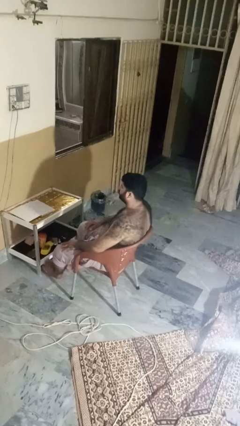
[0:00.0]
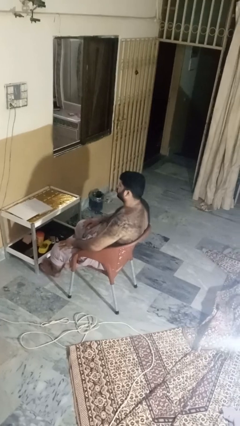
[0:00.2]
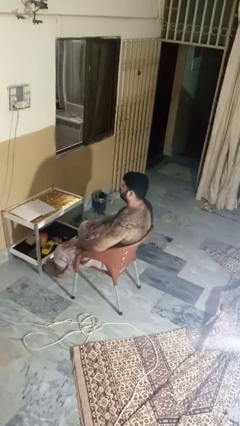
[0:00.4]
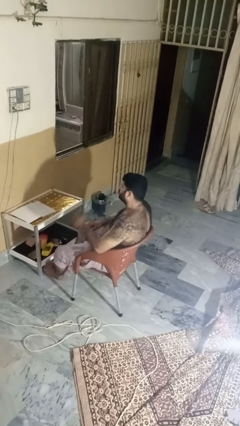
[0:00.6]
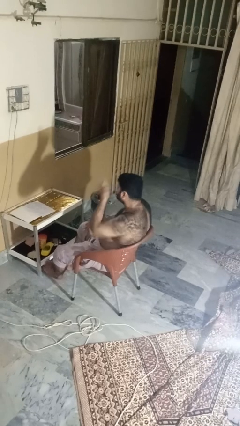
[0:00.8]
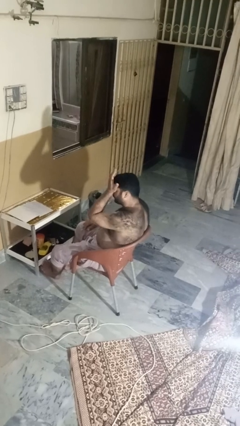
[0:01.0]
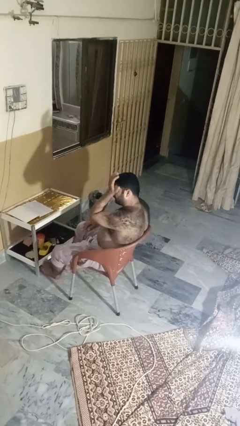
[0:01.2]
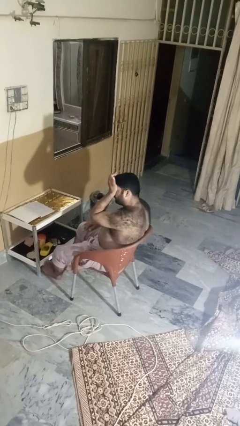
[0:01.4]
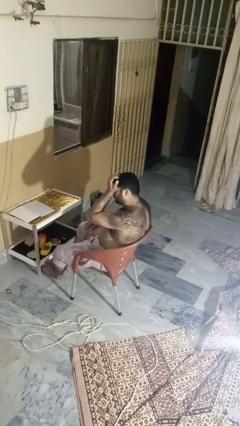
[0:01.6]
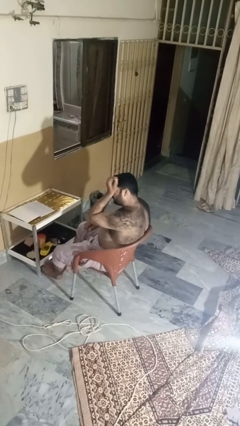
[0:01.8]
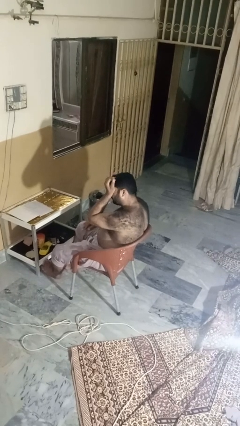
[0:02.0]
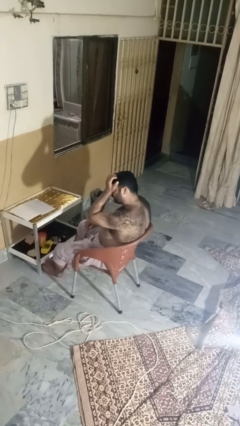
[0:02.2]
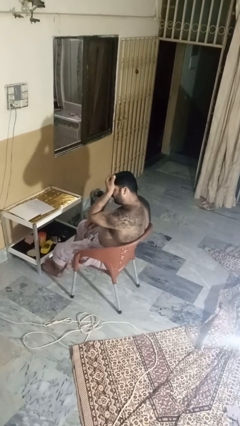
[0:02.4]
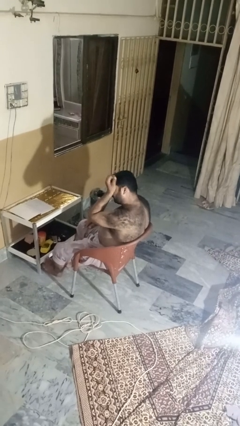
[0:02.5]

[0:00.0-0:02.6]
person rubs eyes

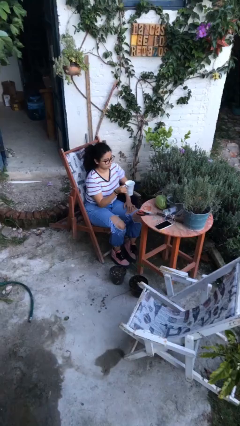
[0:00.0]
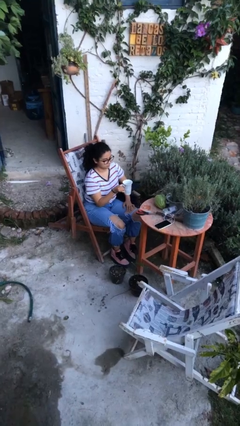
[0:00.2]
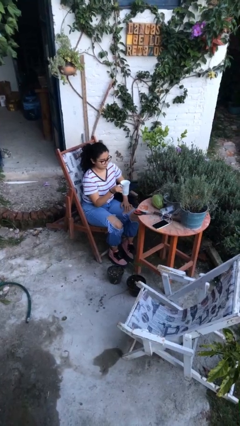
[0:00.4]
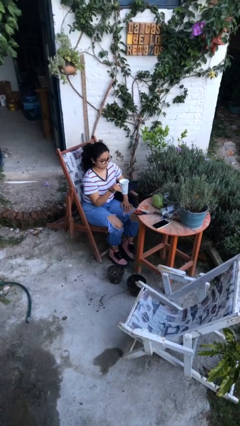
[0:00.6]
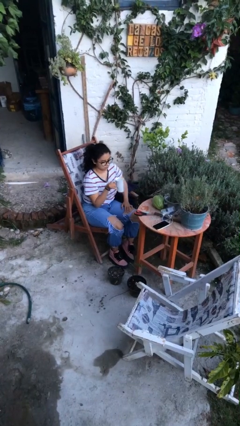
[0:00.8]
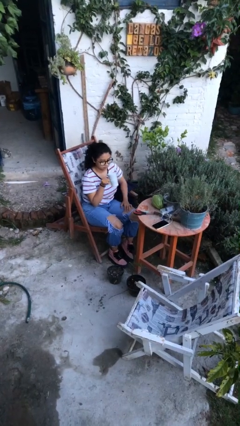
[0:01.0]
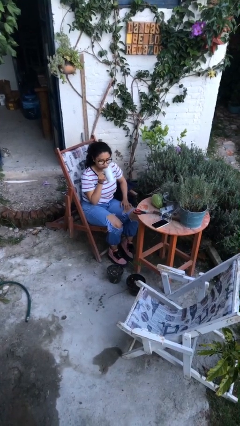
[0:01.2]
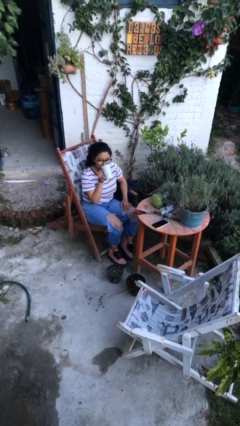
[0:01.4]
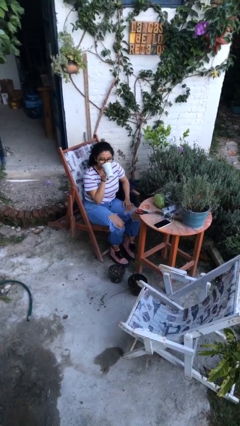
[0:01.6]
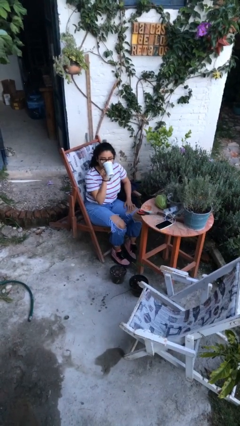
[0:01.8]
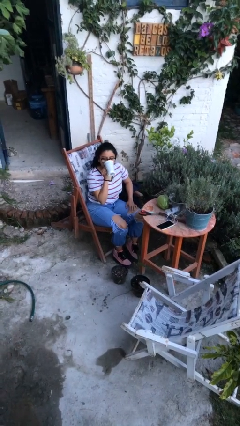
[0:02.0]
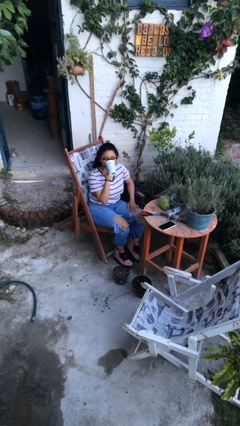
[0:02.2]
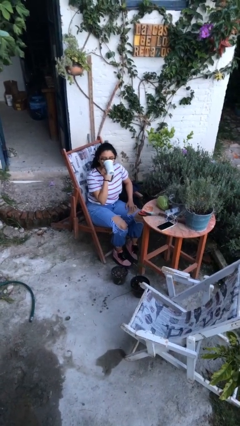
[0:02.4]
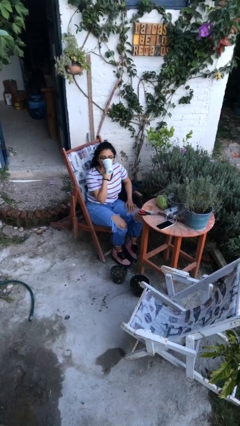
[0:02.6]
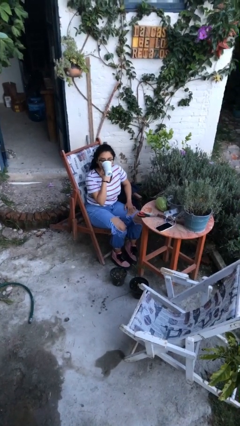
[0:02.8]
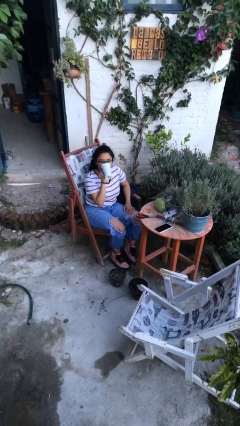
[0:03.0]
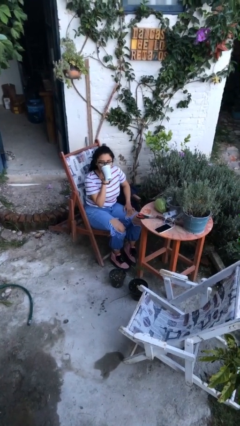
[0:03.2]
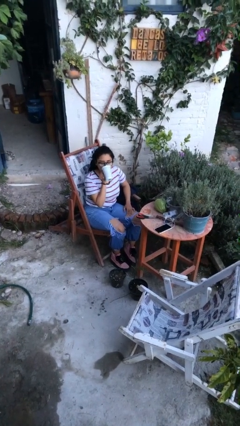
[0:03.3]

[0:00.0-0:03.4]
person drinks from mug

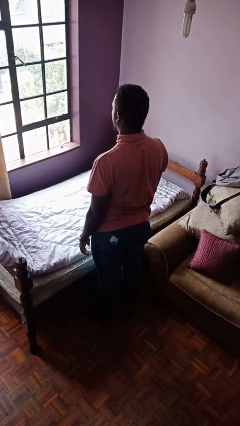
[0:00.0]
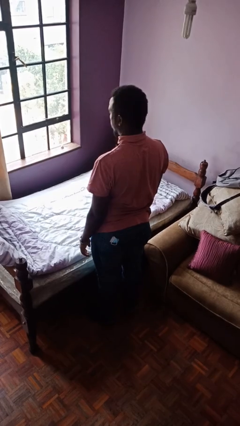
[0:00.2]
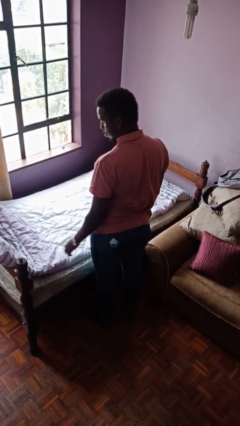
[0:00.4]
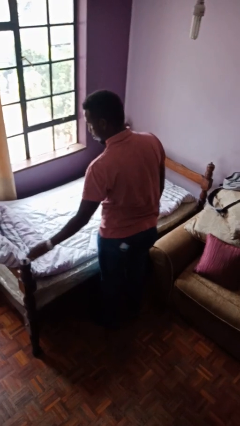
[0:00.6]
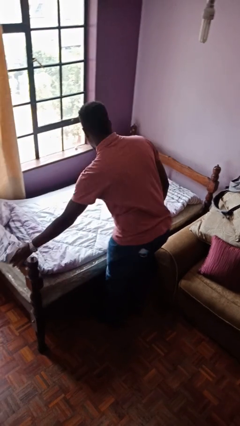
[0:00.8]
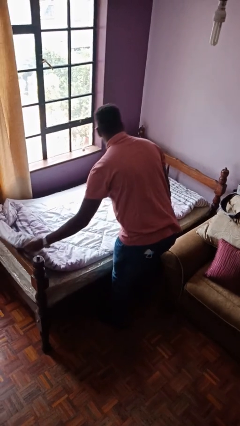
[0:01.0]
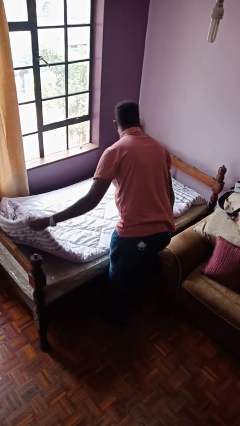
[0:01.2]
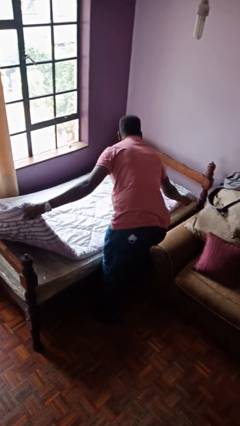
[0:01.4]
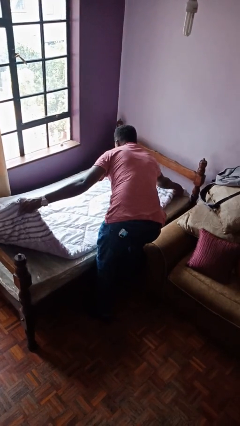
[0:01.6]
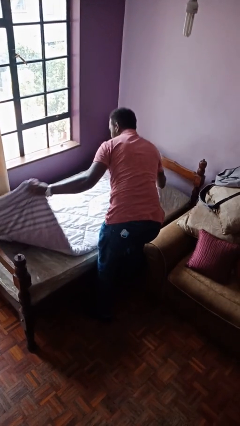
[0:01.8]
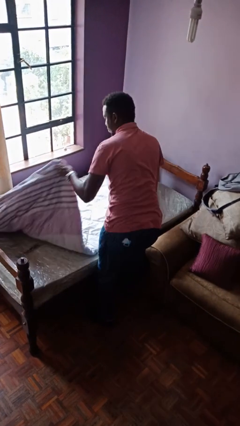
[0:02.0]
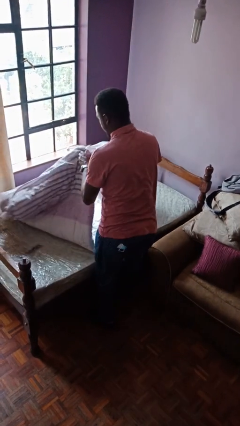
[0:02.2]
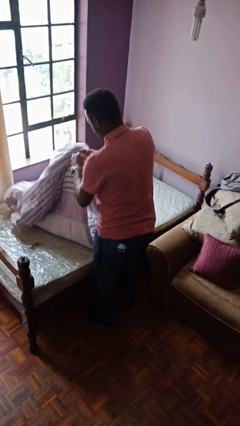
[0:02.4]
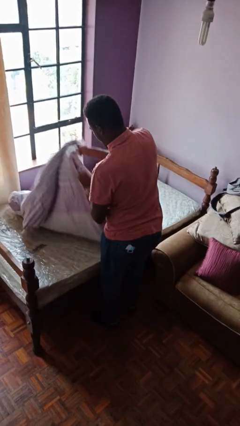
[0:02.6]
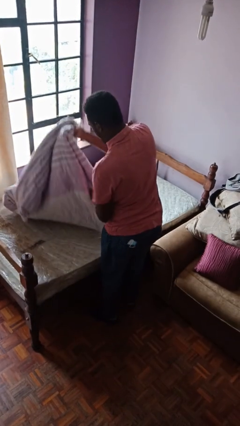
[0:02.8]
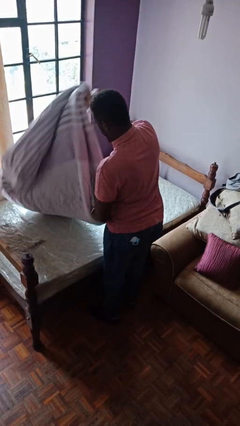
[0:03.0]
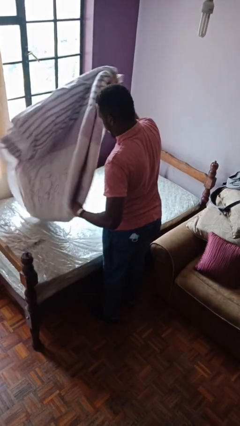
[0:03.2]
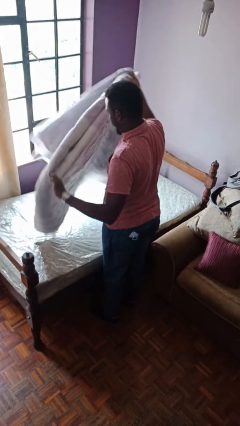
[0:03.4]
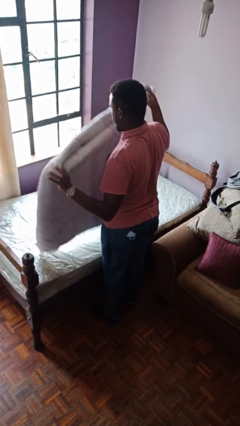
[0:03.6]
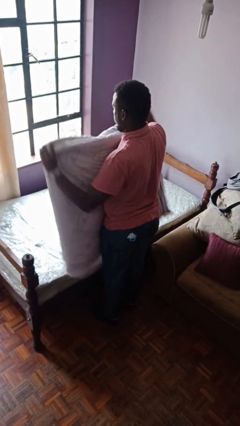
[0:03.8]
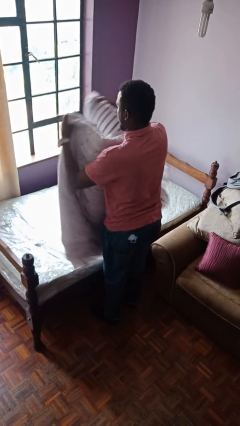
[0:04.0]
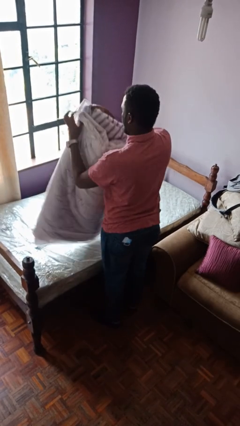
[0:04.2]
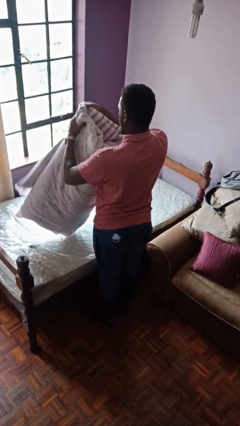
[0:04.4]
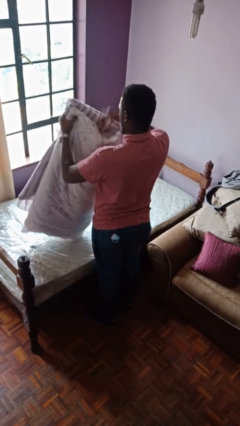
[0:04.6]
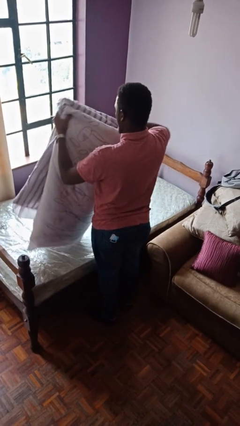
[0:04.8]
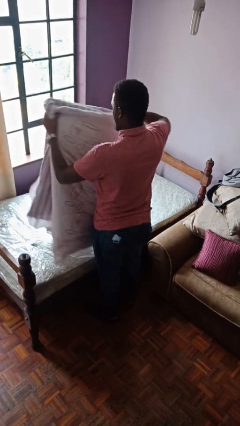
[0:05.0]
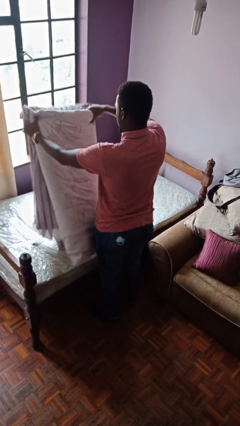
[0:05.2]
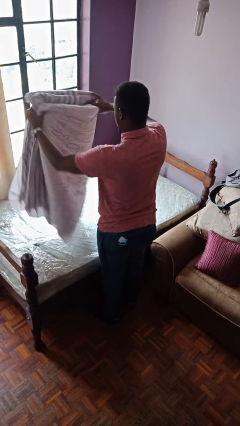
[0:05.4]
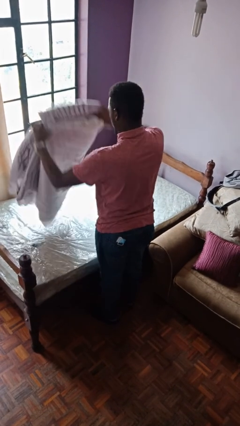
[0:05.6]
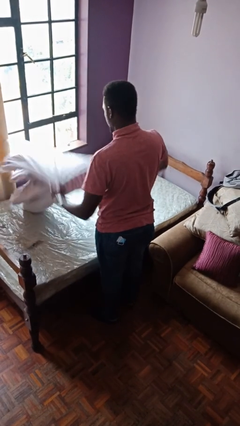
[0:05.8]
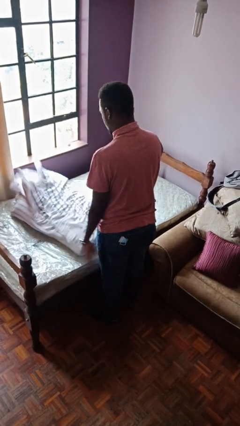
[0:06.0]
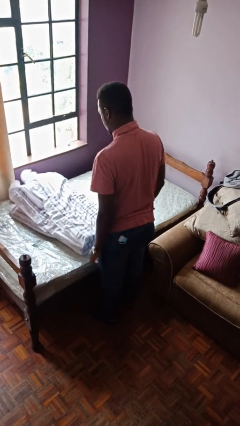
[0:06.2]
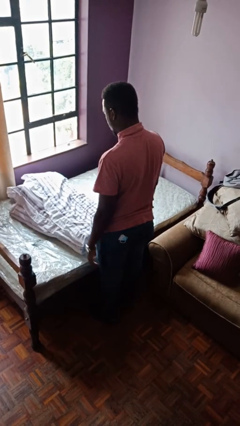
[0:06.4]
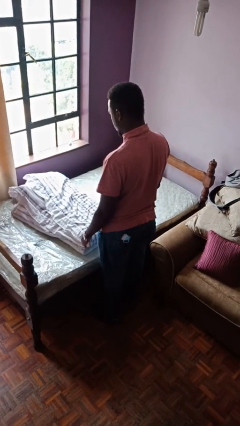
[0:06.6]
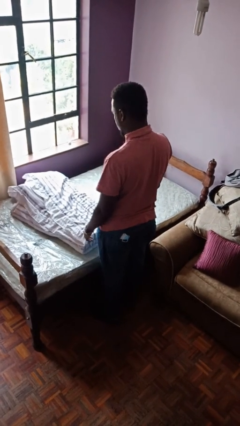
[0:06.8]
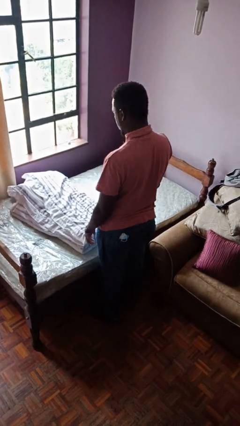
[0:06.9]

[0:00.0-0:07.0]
person folds blanket

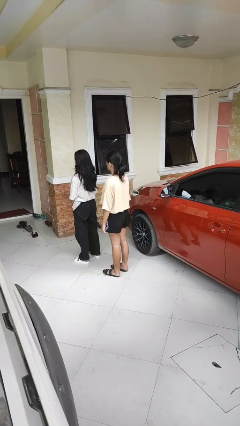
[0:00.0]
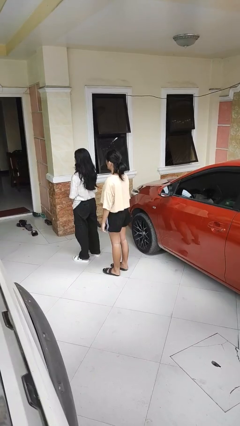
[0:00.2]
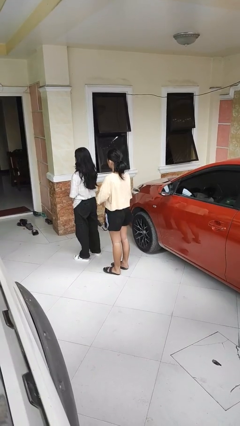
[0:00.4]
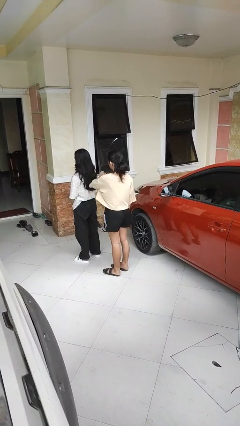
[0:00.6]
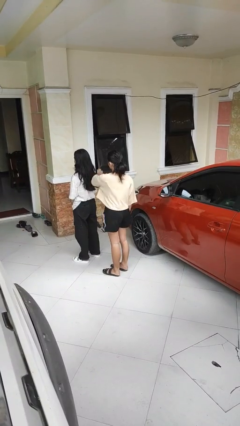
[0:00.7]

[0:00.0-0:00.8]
person grabs person by shoulder

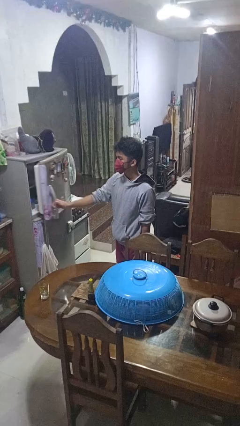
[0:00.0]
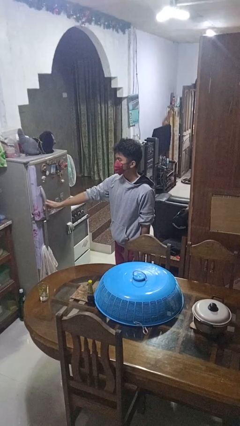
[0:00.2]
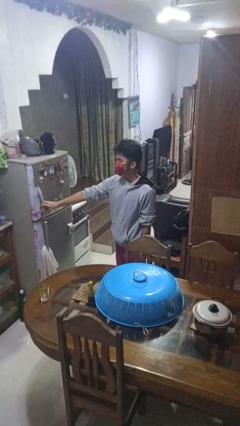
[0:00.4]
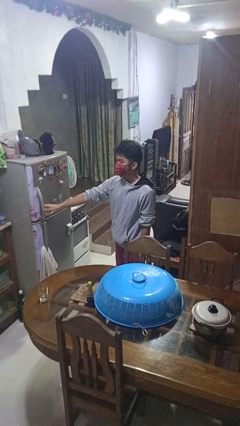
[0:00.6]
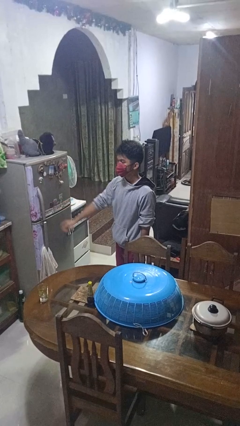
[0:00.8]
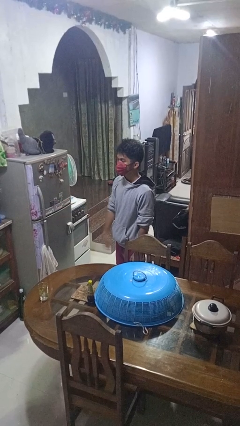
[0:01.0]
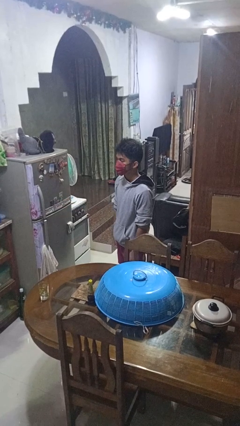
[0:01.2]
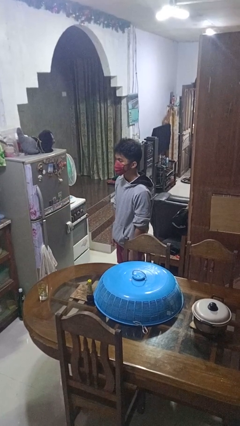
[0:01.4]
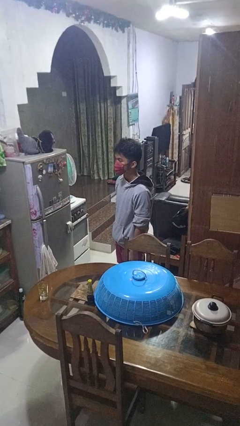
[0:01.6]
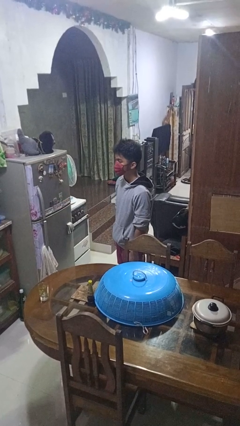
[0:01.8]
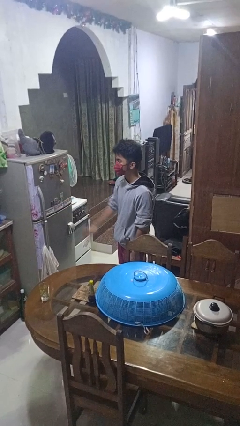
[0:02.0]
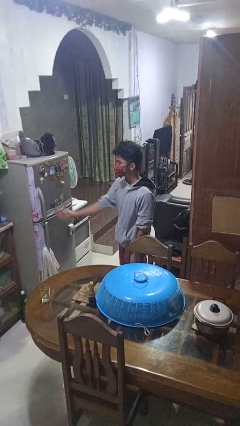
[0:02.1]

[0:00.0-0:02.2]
person closes refrigerator

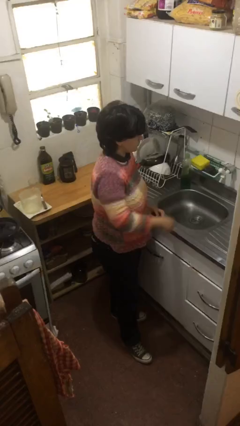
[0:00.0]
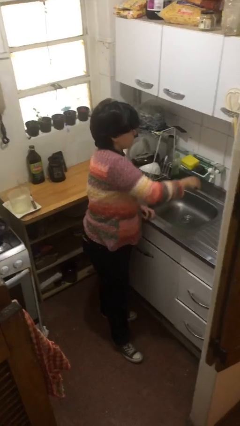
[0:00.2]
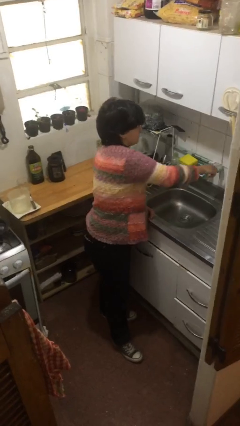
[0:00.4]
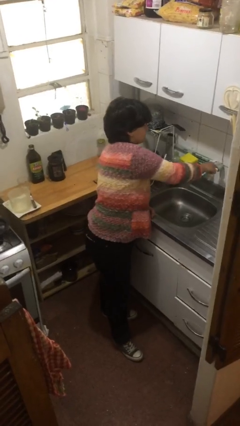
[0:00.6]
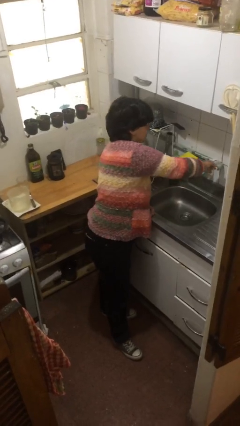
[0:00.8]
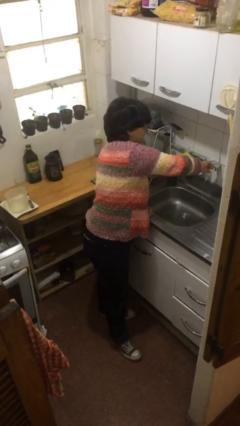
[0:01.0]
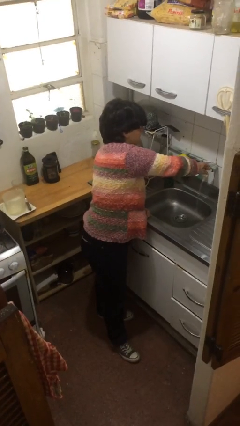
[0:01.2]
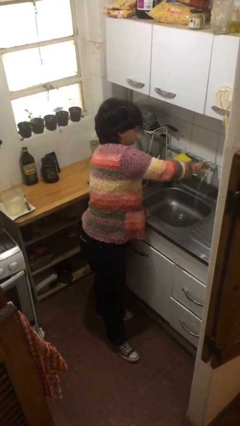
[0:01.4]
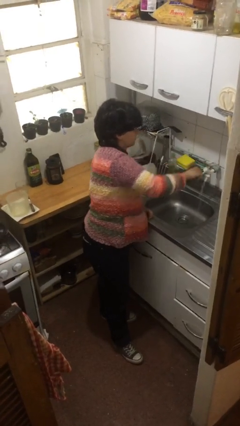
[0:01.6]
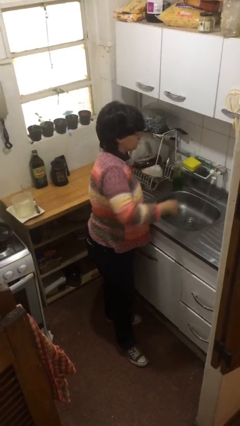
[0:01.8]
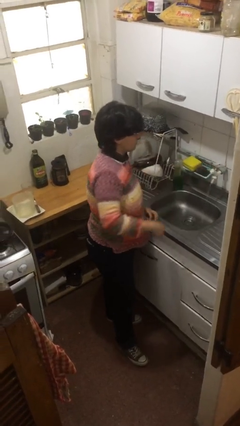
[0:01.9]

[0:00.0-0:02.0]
person turns on faucet
